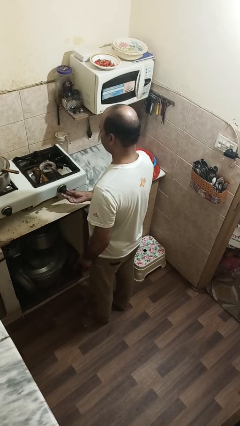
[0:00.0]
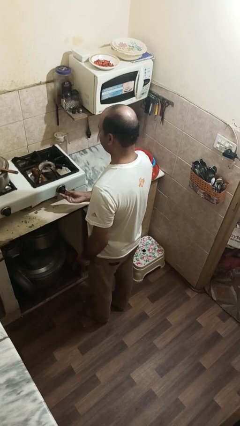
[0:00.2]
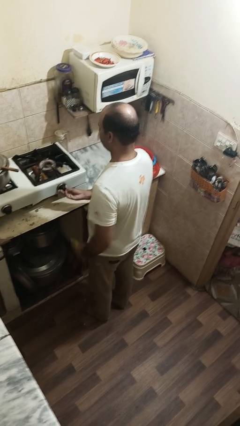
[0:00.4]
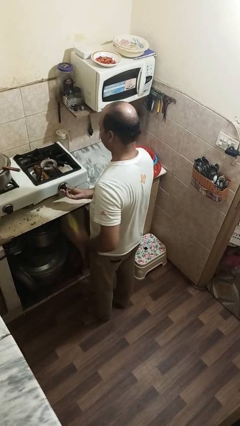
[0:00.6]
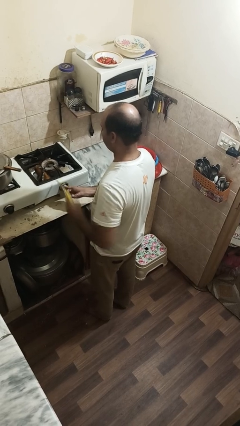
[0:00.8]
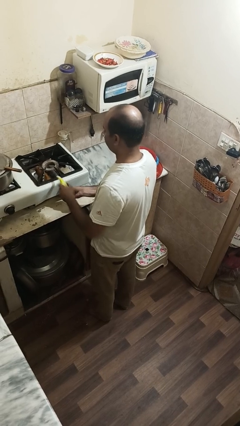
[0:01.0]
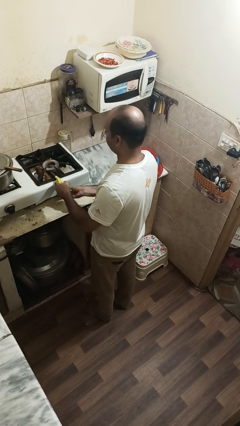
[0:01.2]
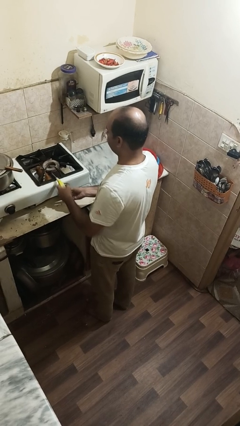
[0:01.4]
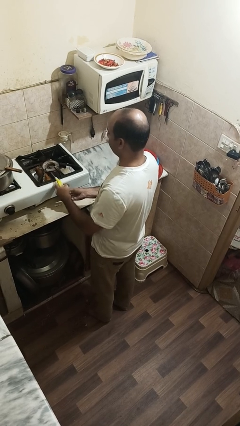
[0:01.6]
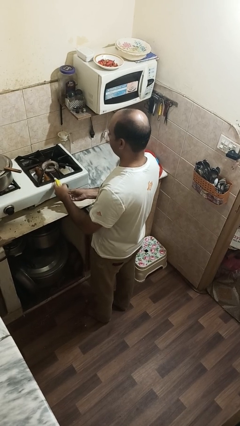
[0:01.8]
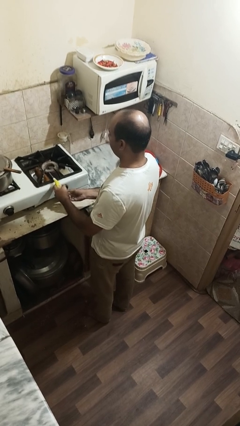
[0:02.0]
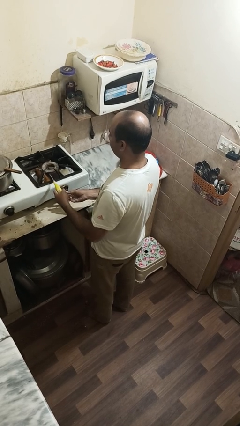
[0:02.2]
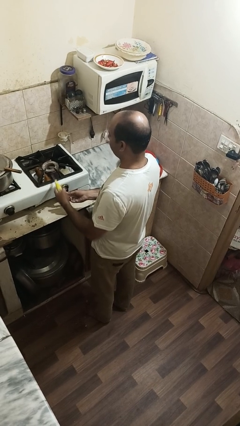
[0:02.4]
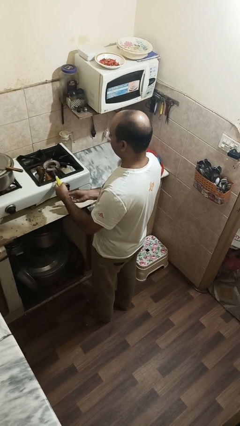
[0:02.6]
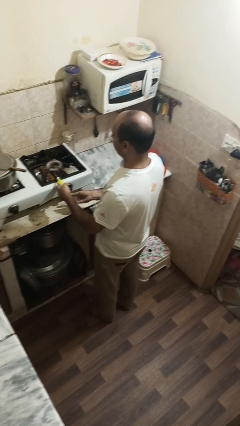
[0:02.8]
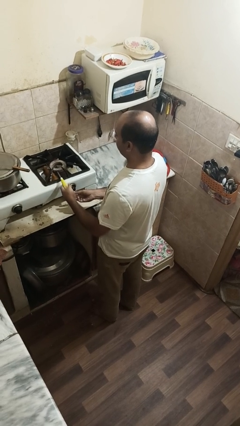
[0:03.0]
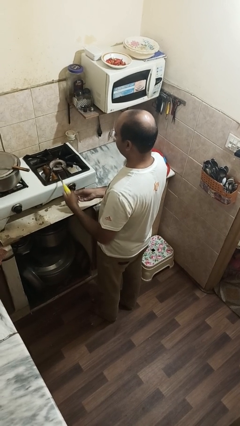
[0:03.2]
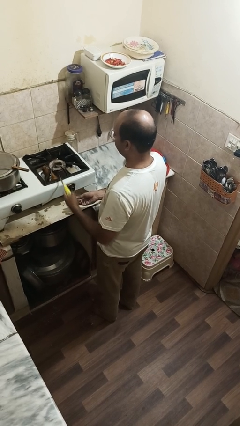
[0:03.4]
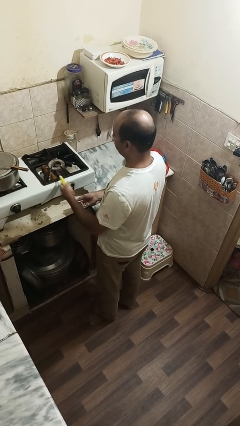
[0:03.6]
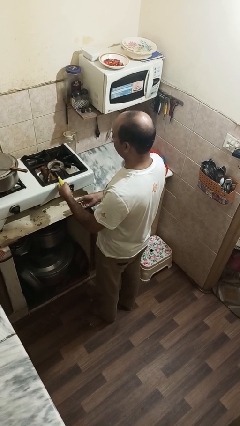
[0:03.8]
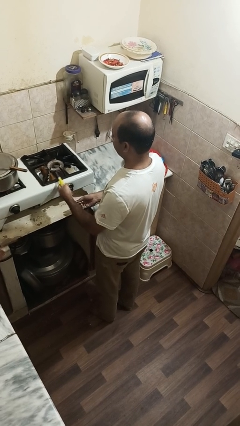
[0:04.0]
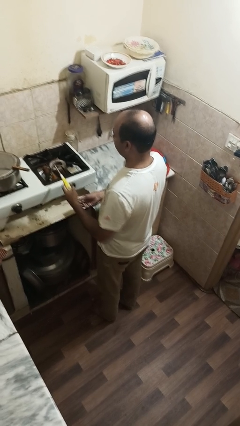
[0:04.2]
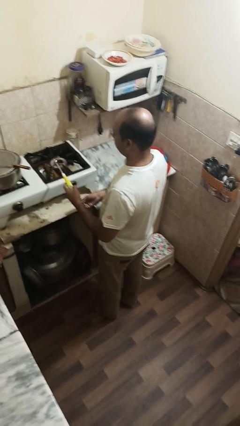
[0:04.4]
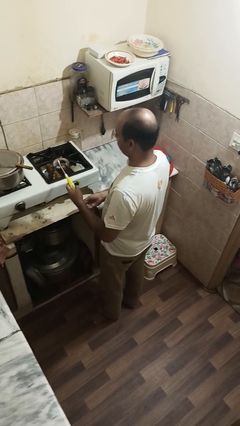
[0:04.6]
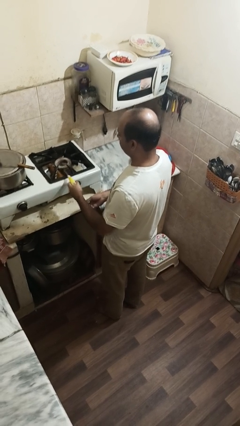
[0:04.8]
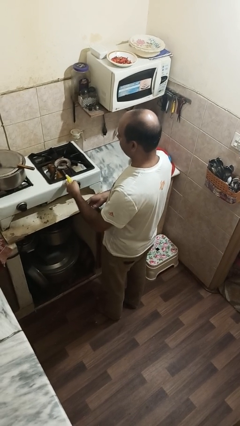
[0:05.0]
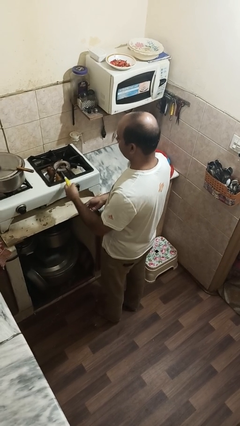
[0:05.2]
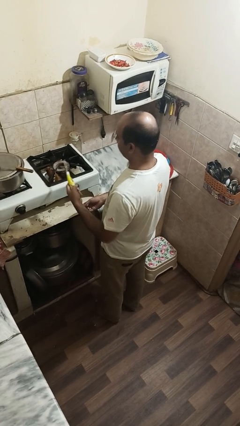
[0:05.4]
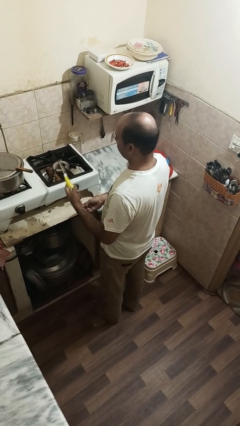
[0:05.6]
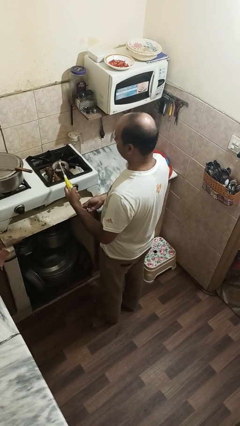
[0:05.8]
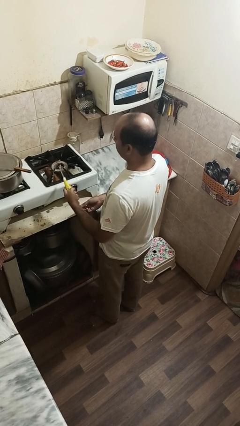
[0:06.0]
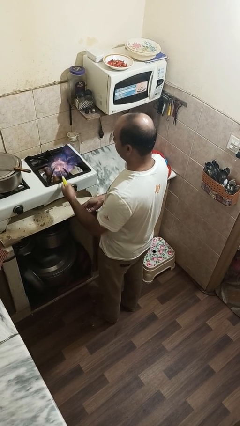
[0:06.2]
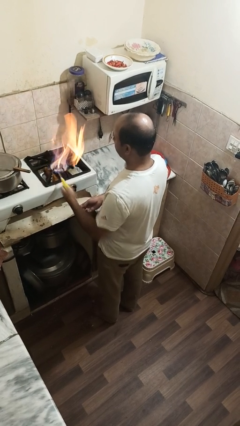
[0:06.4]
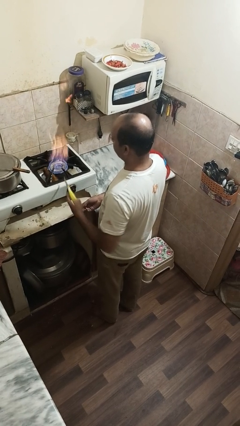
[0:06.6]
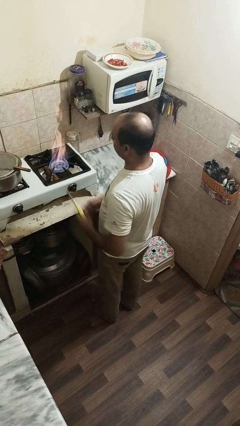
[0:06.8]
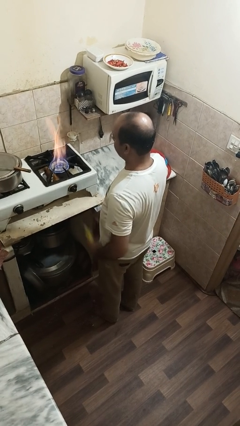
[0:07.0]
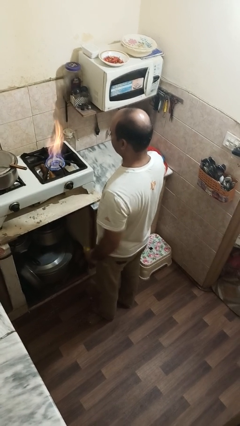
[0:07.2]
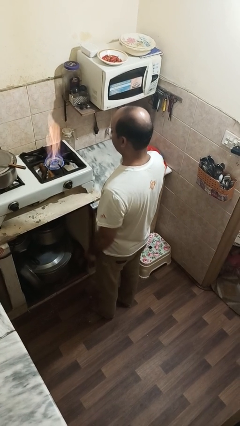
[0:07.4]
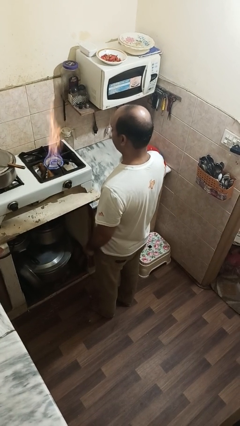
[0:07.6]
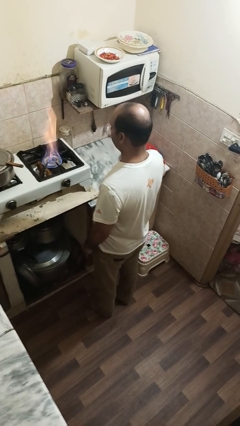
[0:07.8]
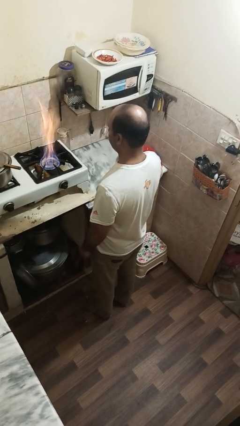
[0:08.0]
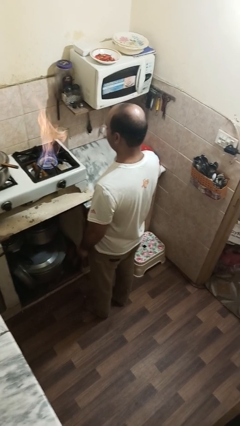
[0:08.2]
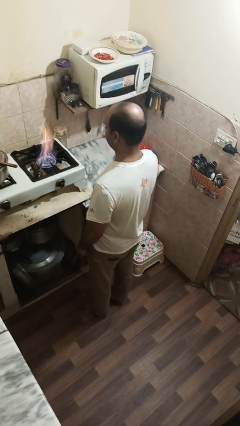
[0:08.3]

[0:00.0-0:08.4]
person turns on stovetop

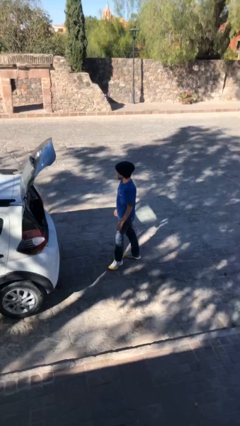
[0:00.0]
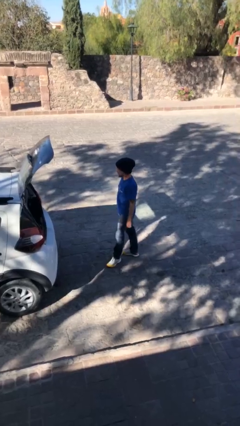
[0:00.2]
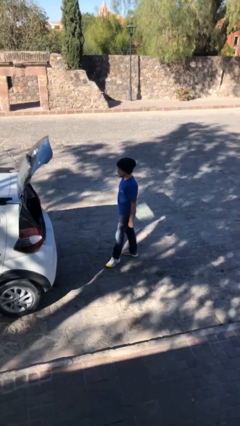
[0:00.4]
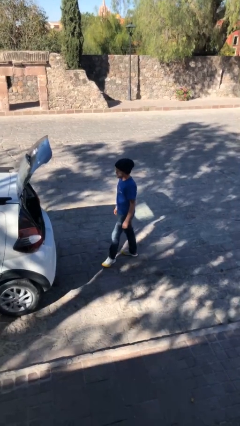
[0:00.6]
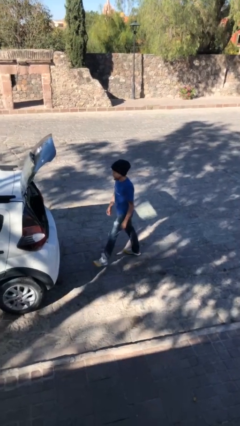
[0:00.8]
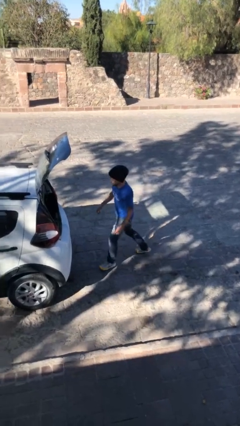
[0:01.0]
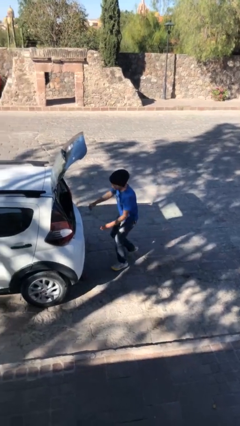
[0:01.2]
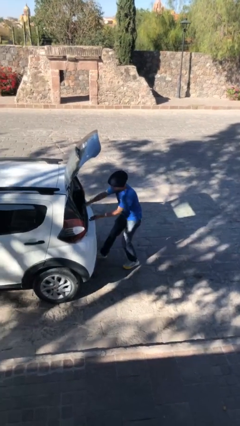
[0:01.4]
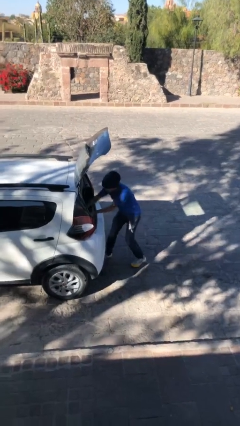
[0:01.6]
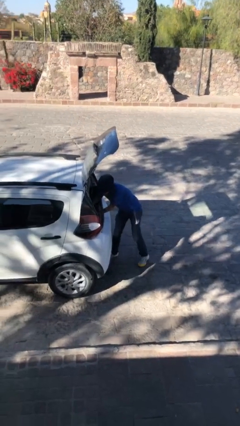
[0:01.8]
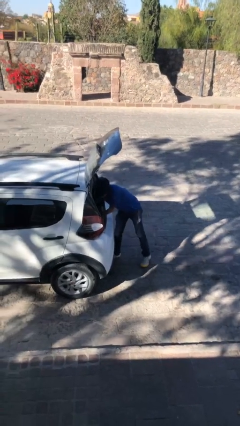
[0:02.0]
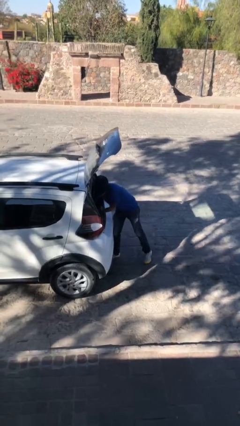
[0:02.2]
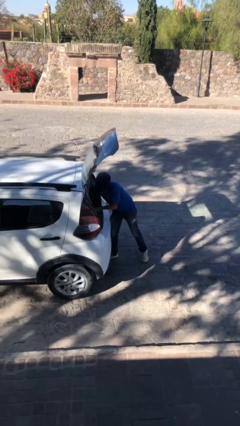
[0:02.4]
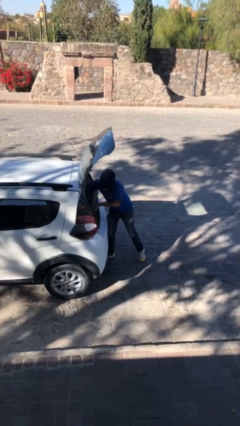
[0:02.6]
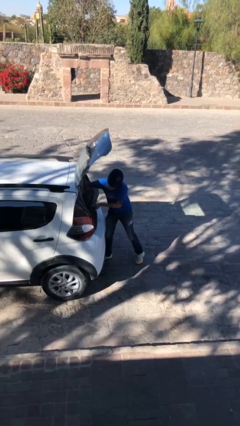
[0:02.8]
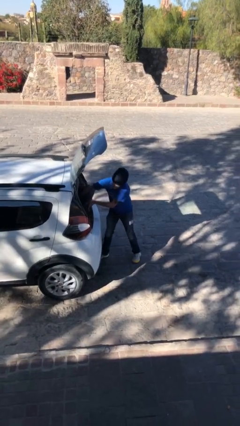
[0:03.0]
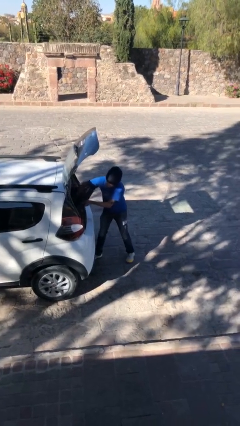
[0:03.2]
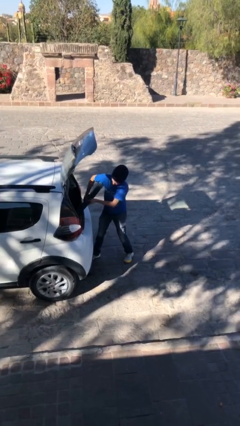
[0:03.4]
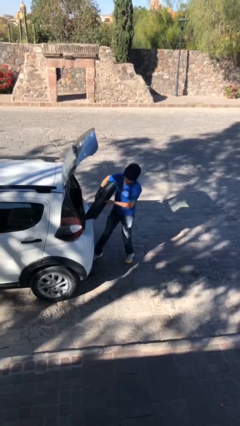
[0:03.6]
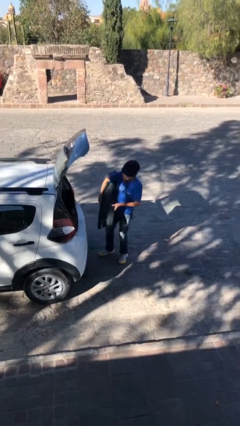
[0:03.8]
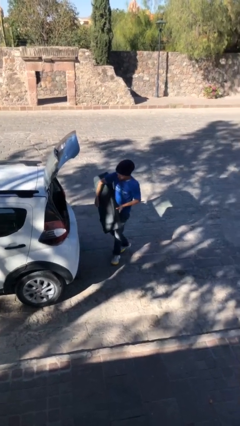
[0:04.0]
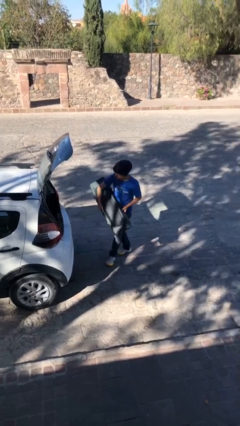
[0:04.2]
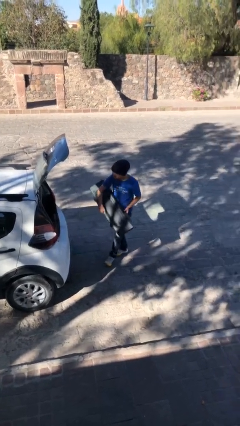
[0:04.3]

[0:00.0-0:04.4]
person unloads car

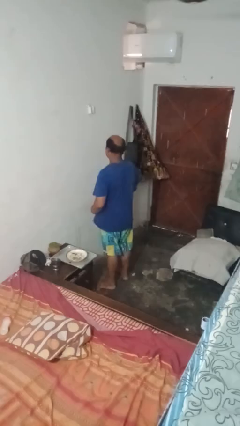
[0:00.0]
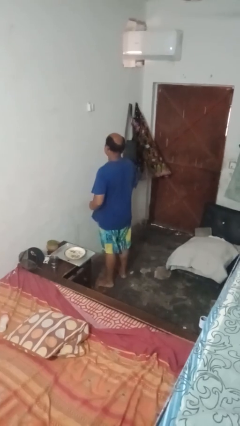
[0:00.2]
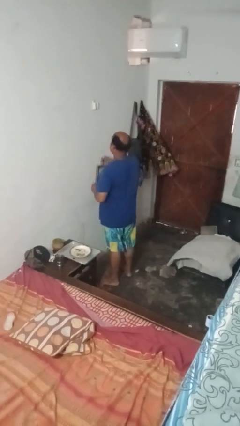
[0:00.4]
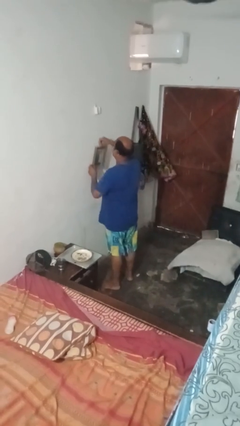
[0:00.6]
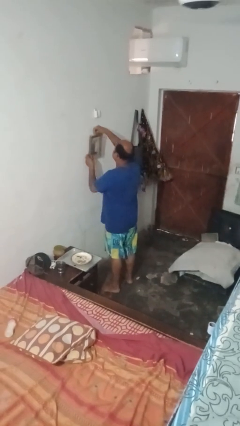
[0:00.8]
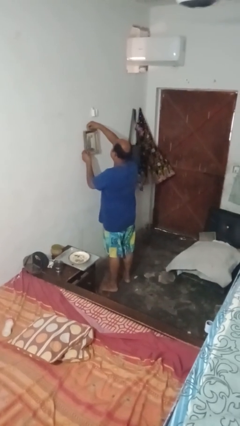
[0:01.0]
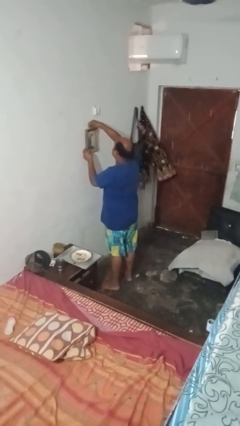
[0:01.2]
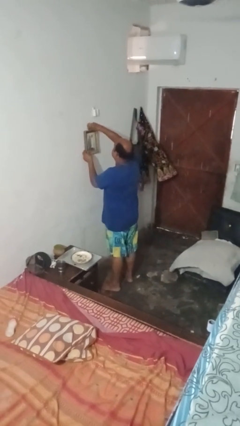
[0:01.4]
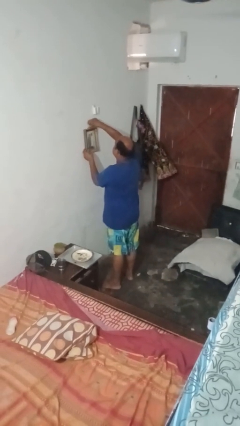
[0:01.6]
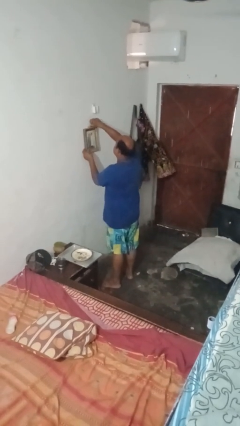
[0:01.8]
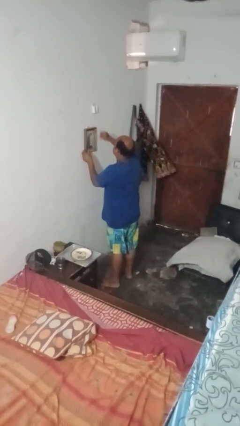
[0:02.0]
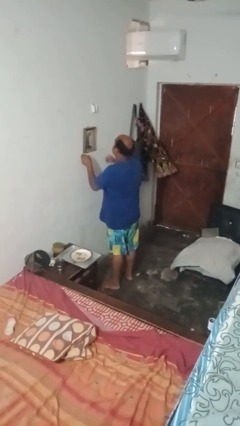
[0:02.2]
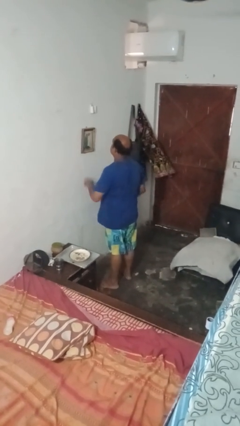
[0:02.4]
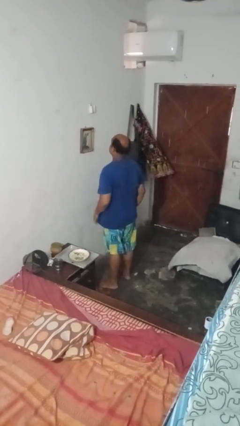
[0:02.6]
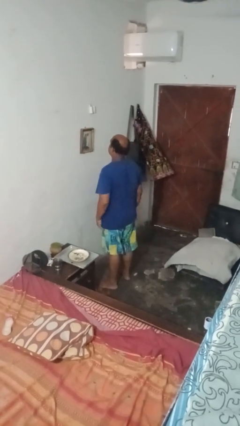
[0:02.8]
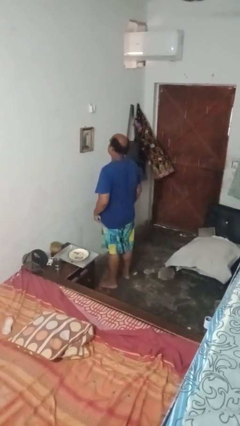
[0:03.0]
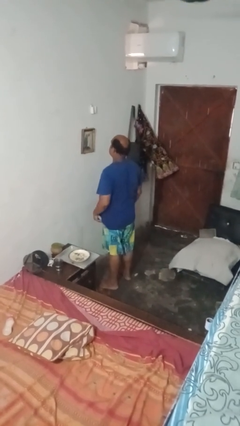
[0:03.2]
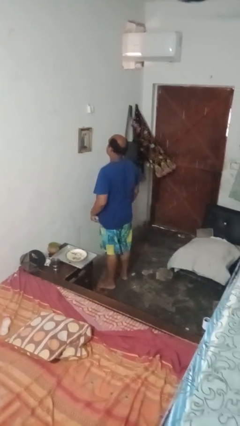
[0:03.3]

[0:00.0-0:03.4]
person puts up picture frame

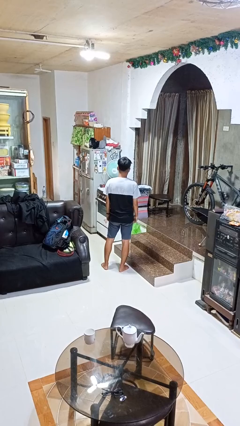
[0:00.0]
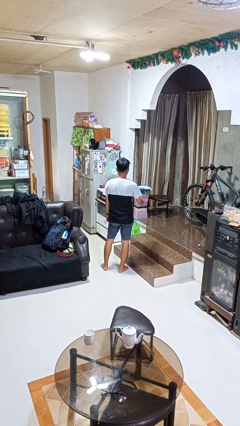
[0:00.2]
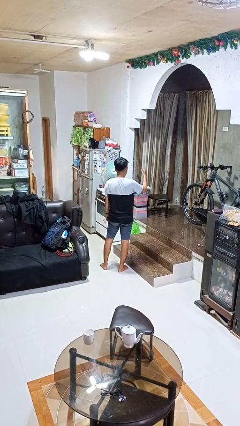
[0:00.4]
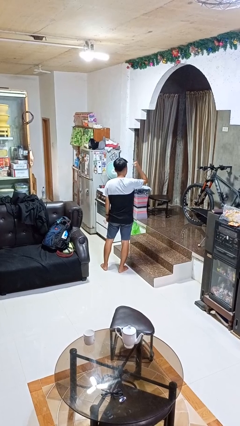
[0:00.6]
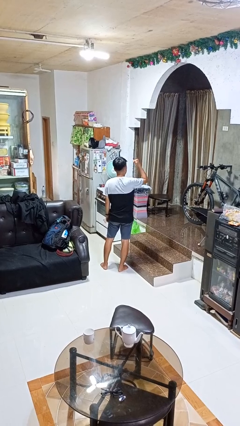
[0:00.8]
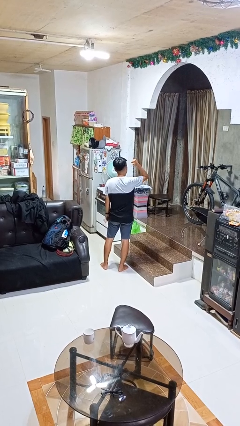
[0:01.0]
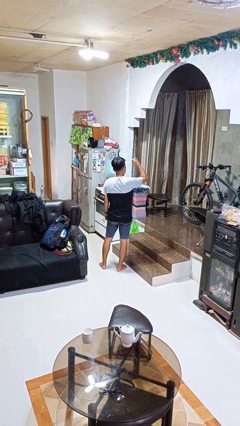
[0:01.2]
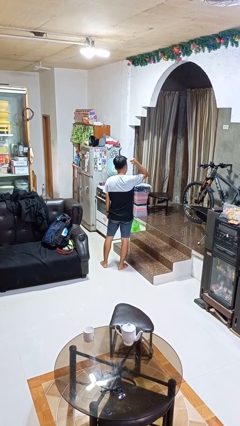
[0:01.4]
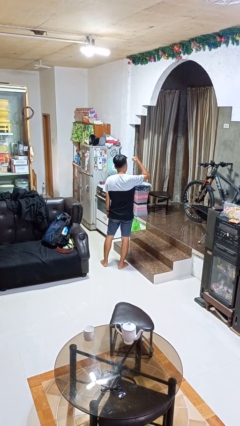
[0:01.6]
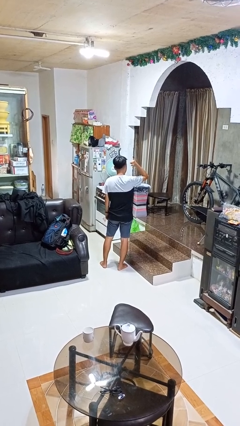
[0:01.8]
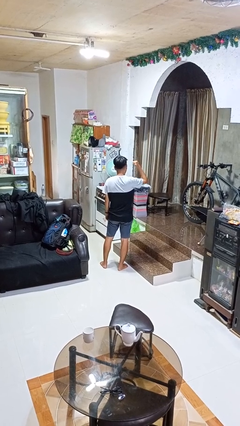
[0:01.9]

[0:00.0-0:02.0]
person gestures behind me
